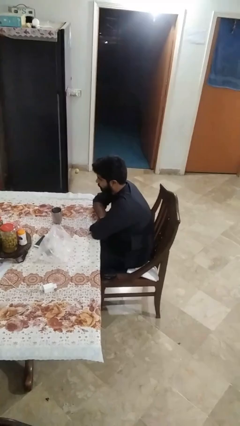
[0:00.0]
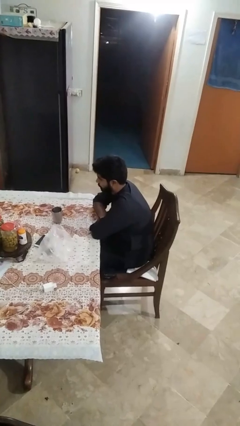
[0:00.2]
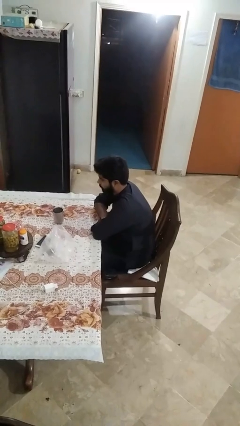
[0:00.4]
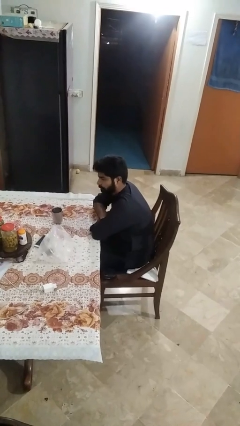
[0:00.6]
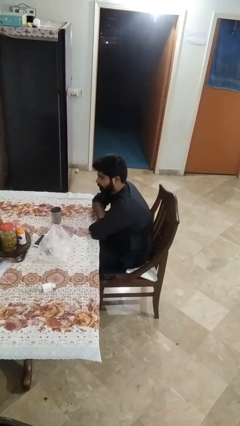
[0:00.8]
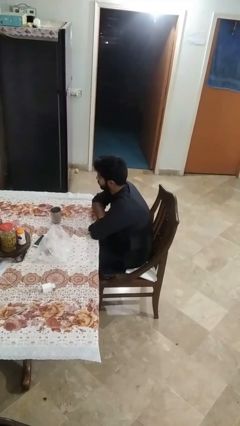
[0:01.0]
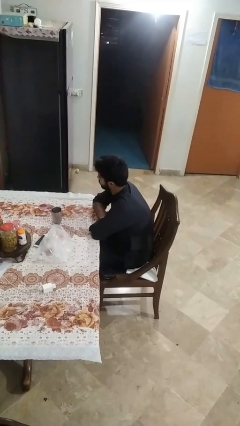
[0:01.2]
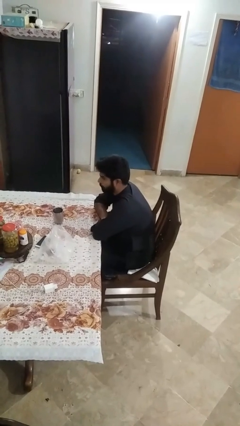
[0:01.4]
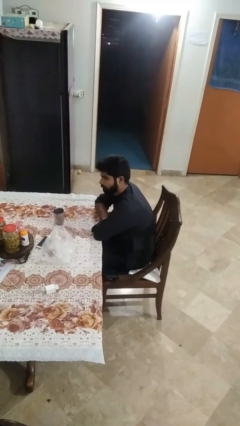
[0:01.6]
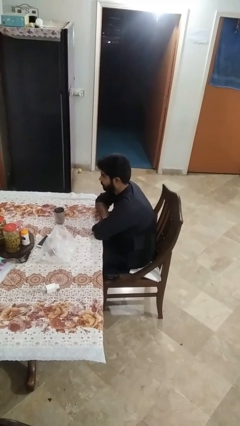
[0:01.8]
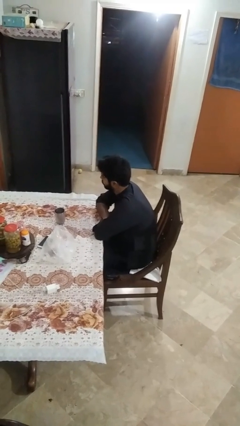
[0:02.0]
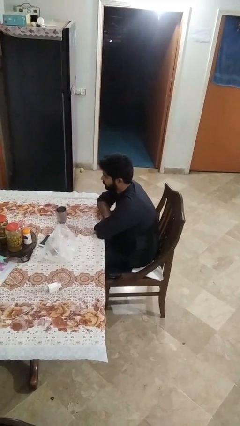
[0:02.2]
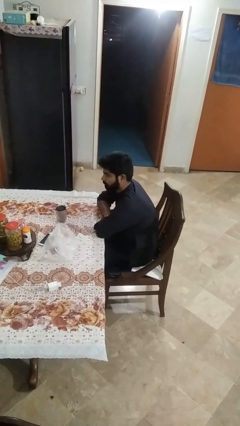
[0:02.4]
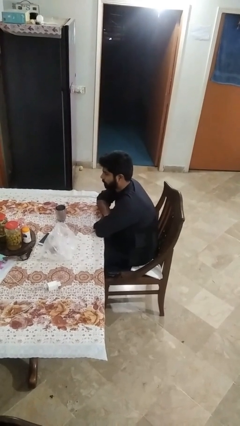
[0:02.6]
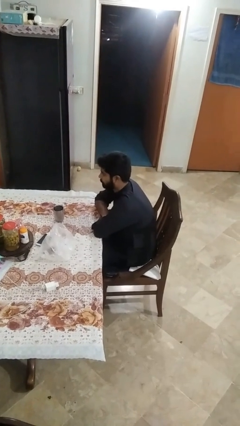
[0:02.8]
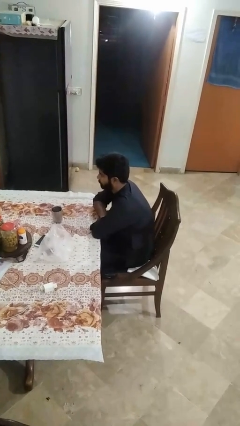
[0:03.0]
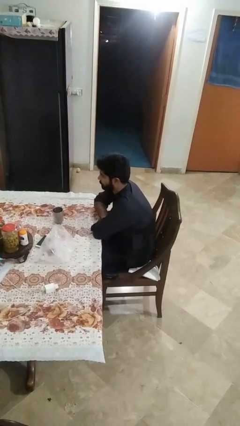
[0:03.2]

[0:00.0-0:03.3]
person shakes head

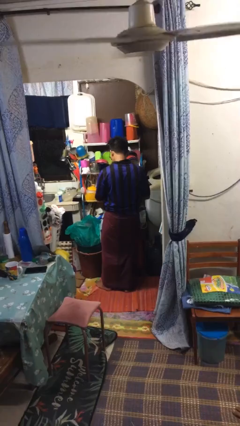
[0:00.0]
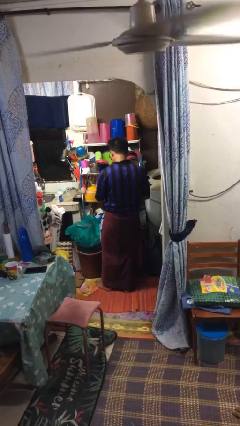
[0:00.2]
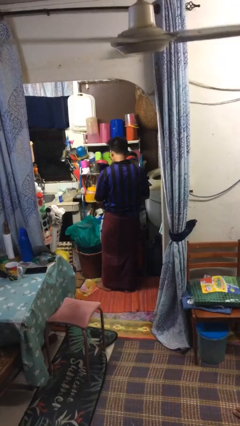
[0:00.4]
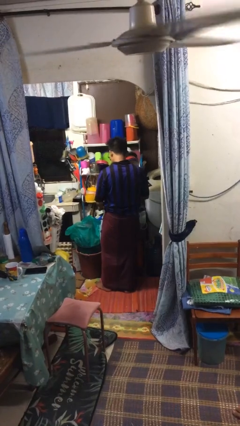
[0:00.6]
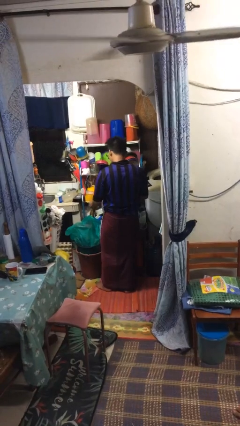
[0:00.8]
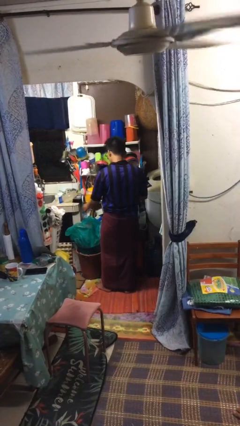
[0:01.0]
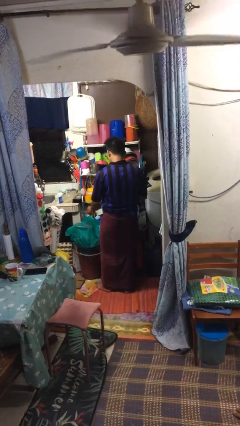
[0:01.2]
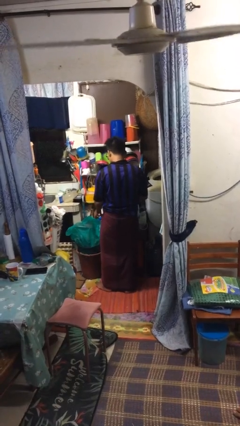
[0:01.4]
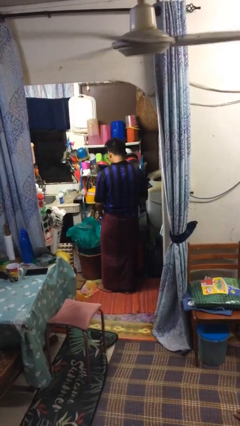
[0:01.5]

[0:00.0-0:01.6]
person discards trash

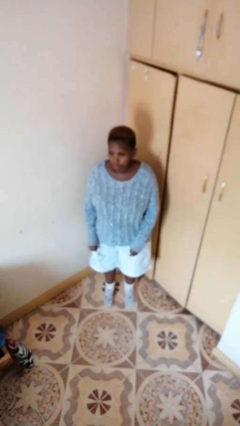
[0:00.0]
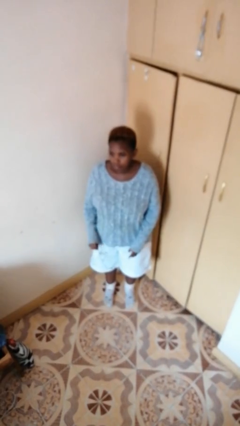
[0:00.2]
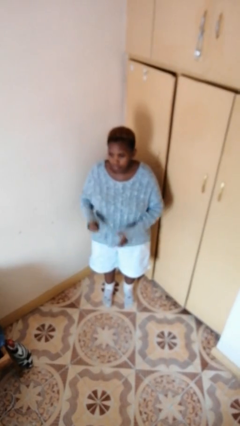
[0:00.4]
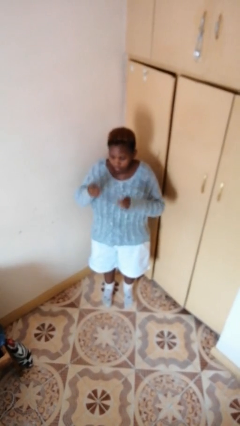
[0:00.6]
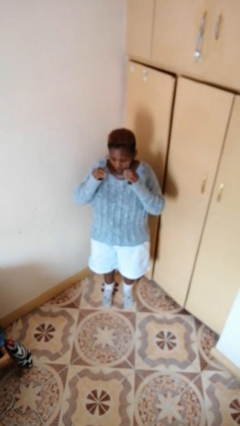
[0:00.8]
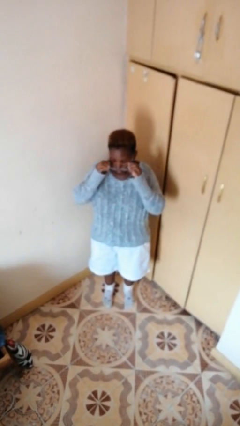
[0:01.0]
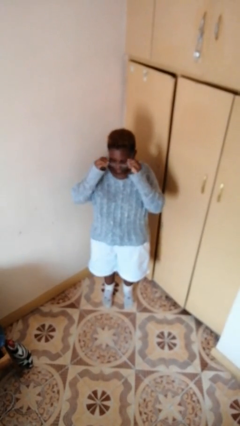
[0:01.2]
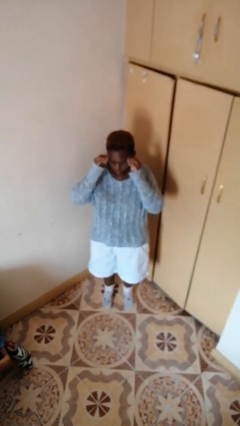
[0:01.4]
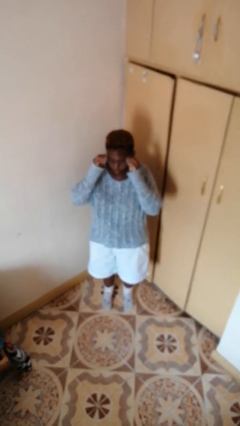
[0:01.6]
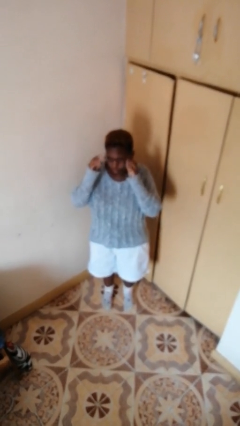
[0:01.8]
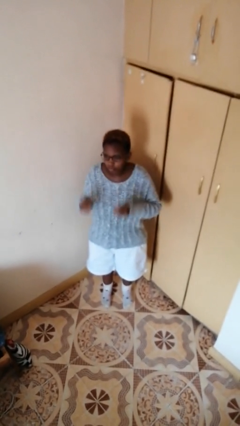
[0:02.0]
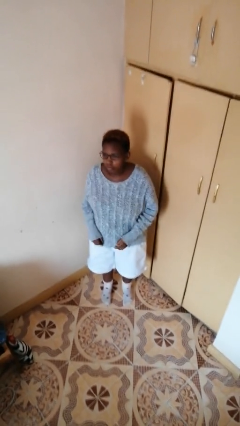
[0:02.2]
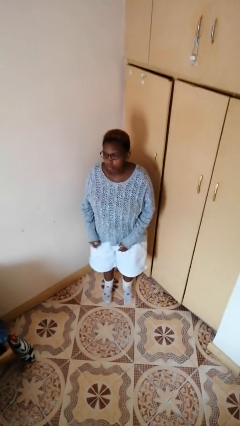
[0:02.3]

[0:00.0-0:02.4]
person puts on glasses

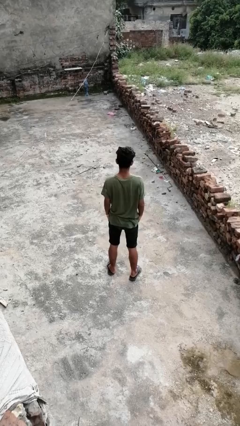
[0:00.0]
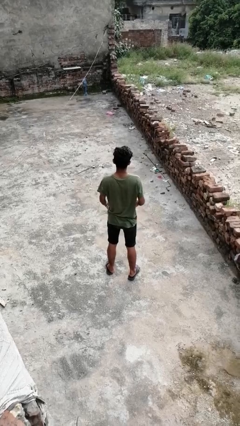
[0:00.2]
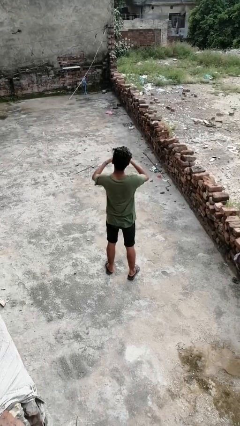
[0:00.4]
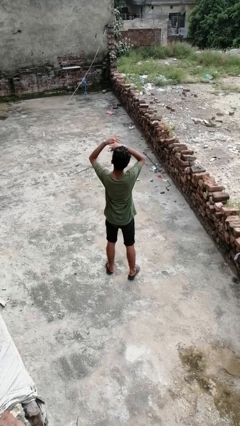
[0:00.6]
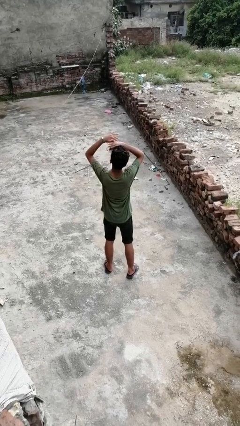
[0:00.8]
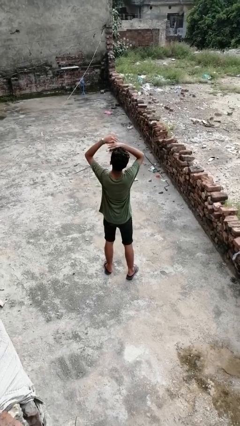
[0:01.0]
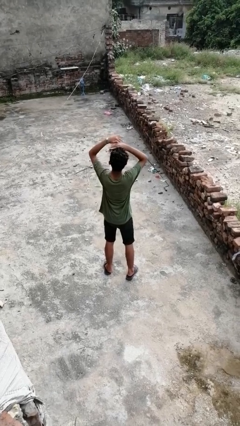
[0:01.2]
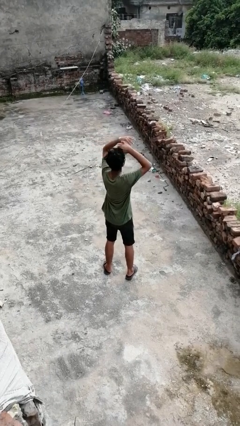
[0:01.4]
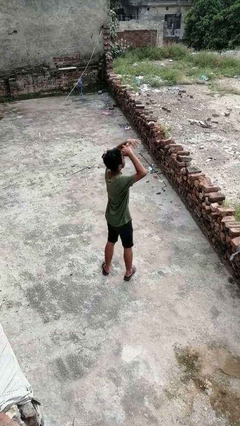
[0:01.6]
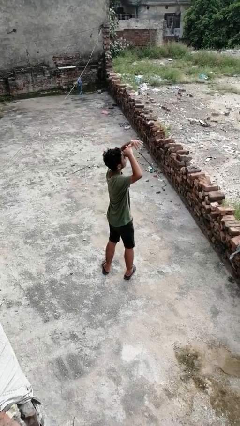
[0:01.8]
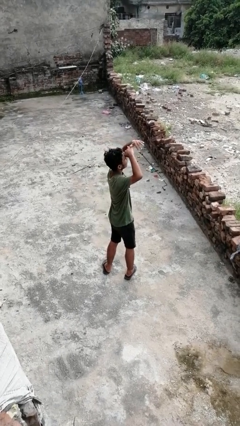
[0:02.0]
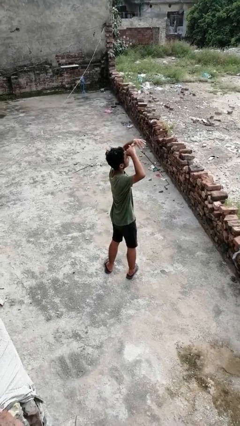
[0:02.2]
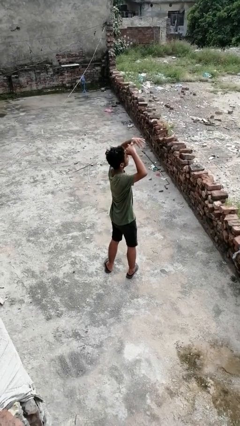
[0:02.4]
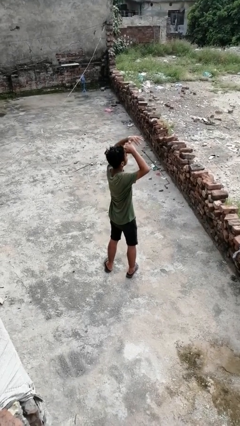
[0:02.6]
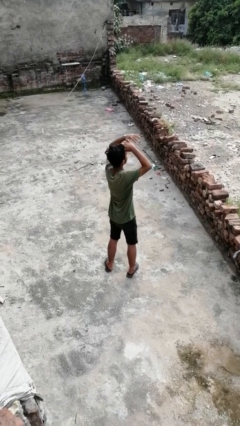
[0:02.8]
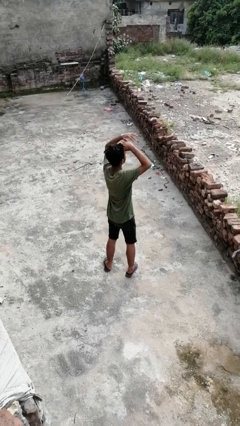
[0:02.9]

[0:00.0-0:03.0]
person shades eyes

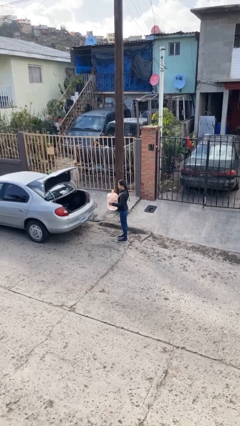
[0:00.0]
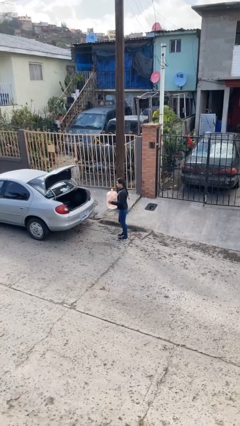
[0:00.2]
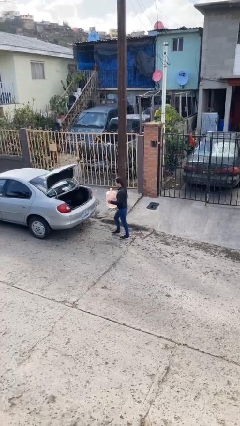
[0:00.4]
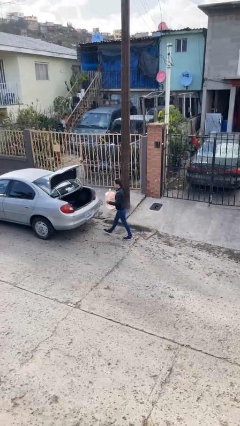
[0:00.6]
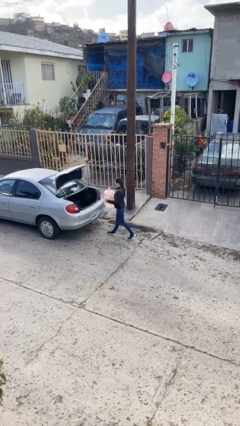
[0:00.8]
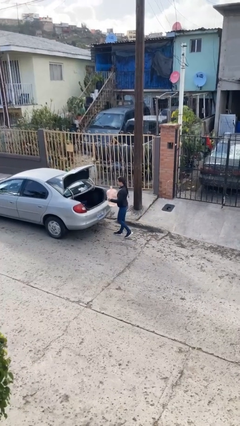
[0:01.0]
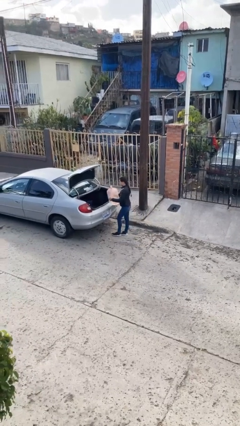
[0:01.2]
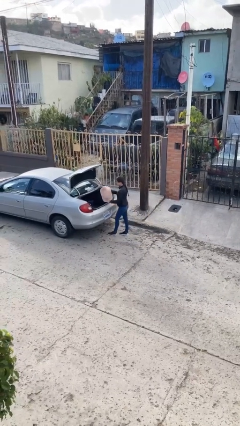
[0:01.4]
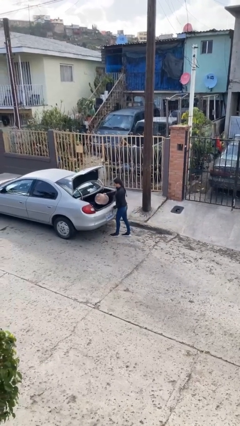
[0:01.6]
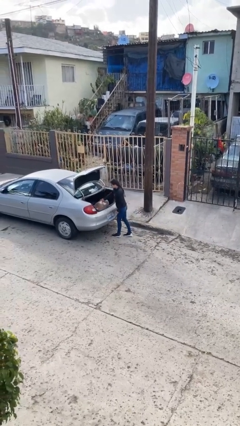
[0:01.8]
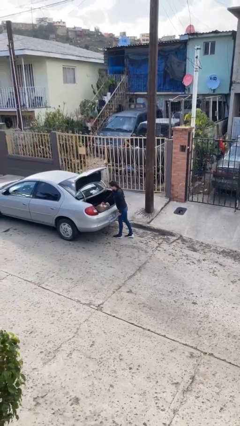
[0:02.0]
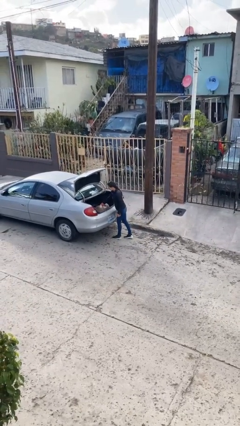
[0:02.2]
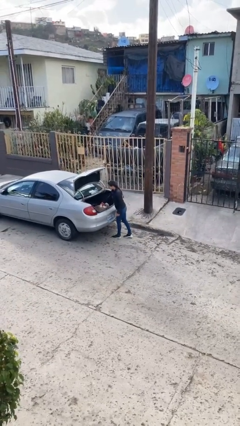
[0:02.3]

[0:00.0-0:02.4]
person enters car

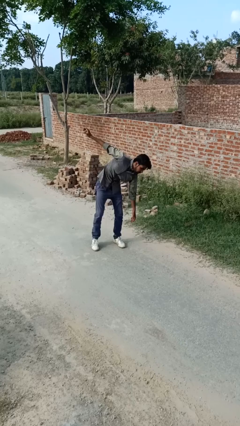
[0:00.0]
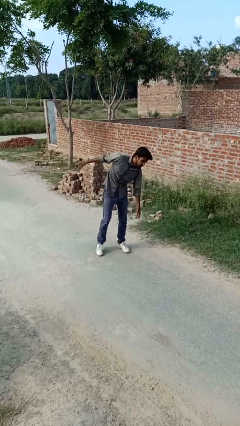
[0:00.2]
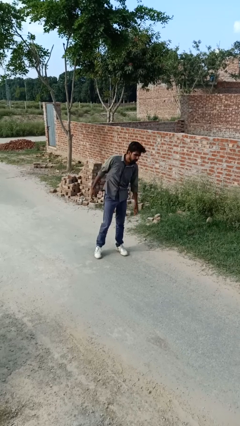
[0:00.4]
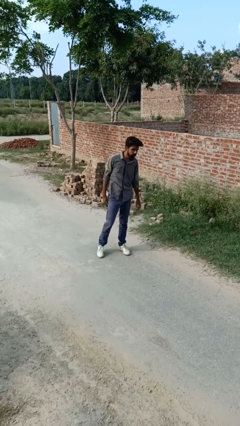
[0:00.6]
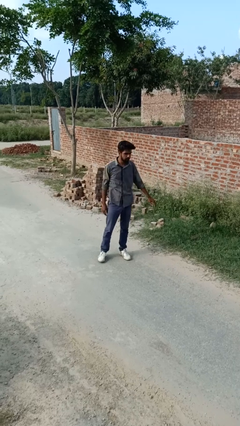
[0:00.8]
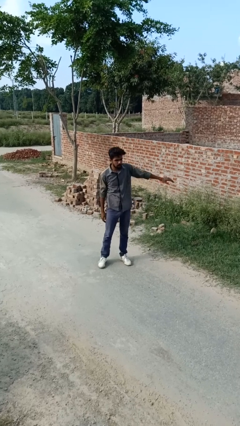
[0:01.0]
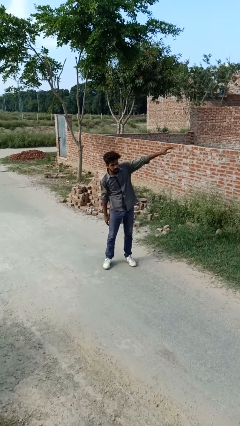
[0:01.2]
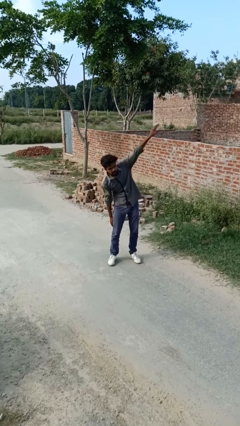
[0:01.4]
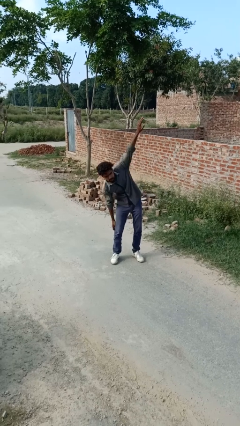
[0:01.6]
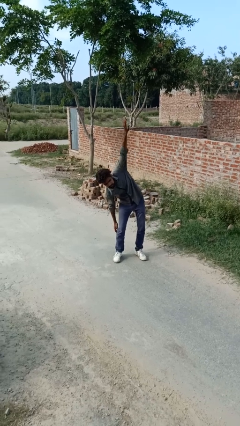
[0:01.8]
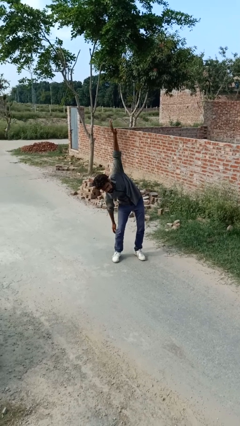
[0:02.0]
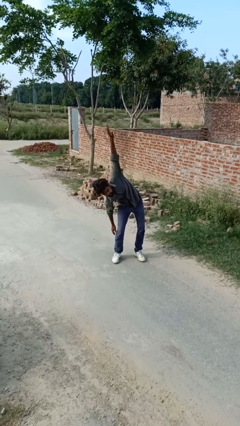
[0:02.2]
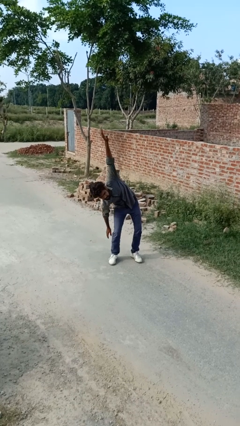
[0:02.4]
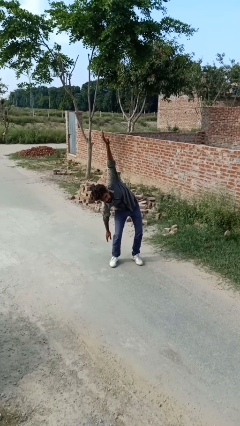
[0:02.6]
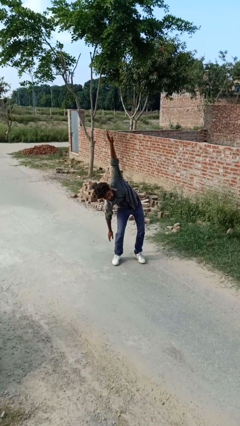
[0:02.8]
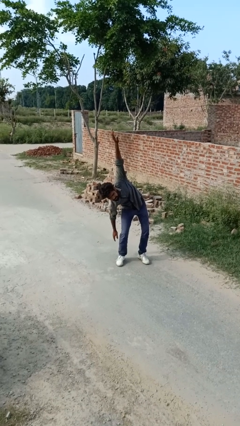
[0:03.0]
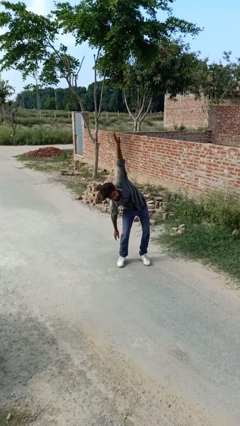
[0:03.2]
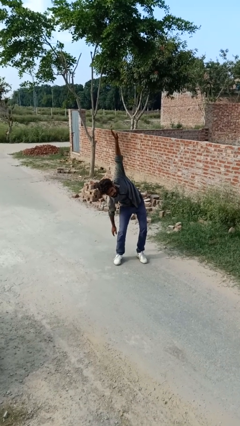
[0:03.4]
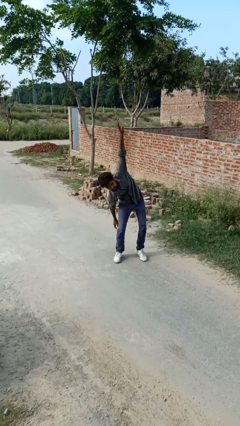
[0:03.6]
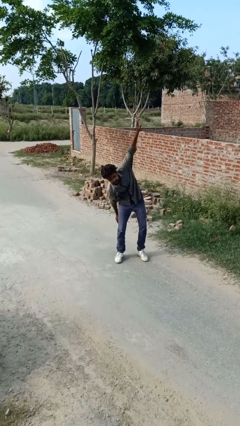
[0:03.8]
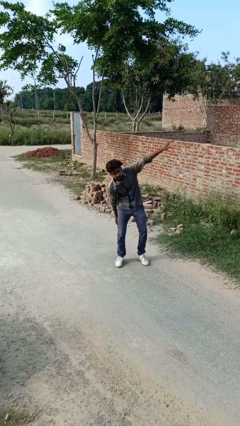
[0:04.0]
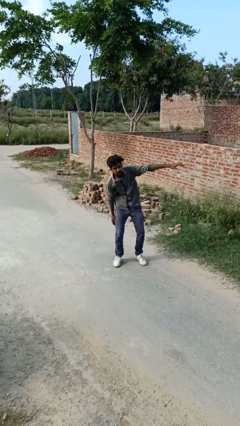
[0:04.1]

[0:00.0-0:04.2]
person stretches arms over head

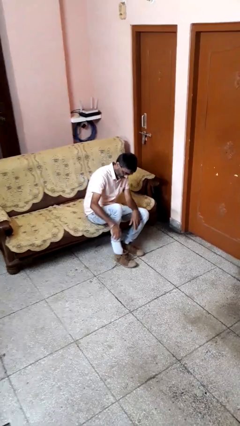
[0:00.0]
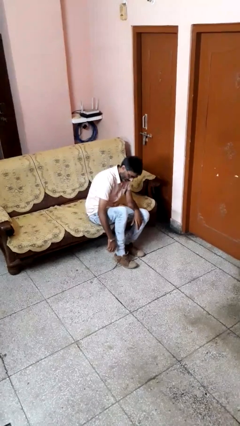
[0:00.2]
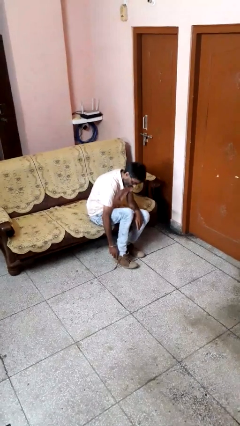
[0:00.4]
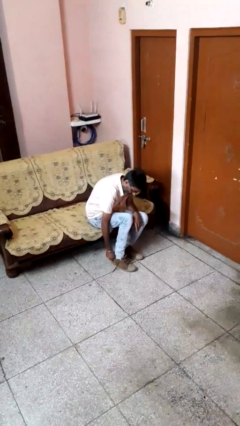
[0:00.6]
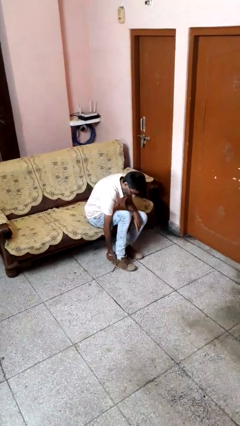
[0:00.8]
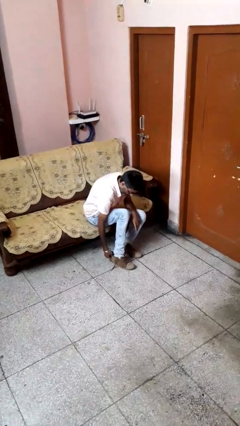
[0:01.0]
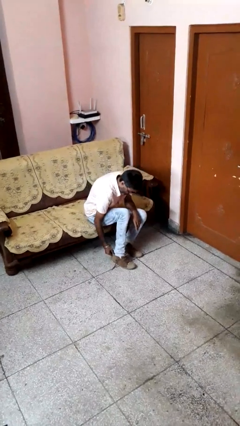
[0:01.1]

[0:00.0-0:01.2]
person puts on shoes
